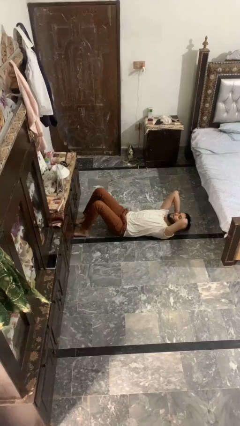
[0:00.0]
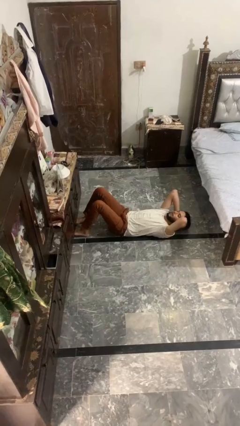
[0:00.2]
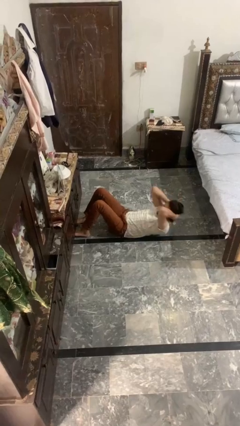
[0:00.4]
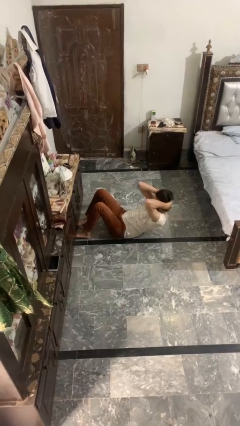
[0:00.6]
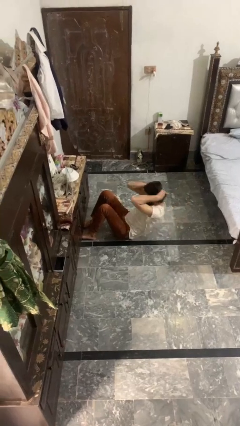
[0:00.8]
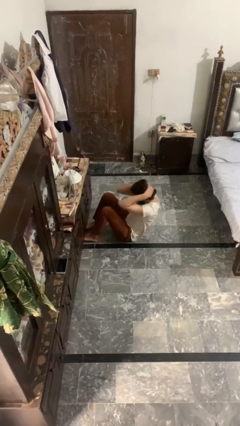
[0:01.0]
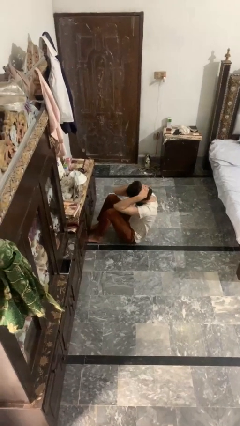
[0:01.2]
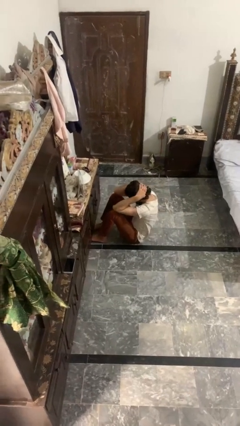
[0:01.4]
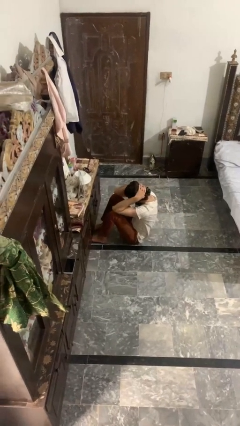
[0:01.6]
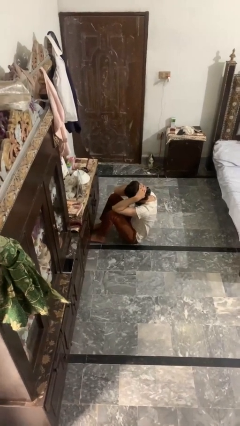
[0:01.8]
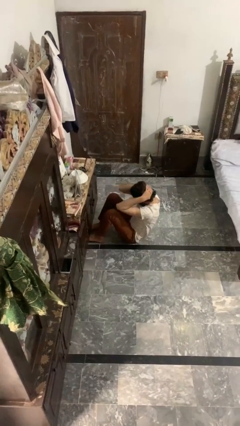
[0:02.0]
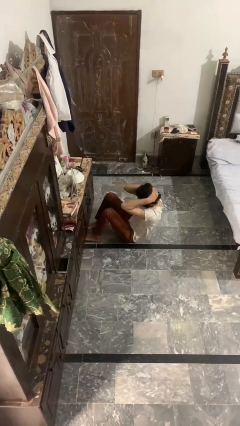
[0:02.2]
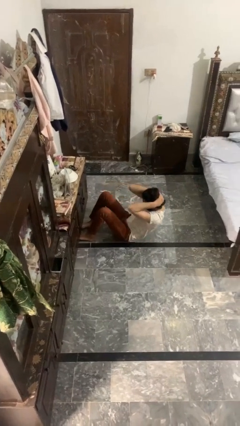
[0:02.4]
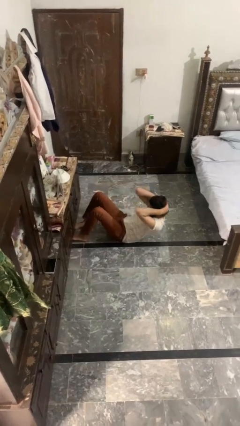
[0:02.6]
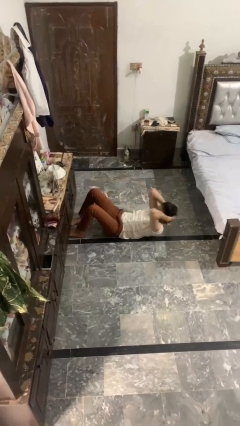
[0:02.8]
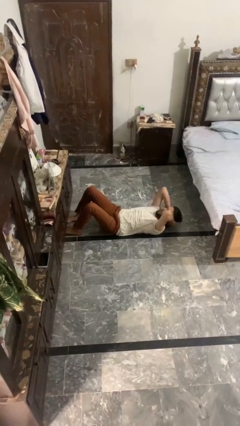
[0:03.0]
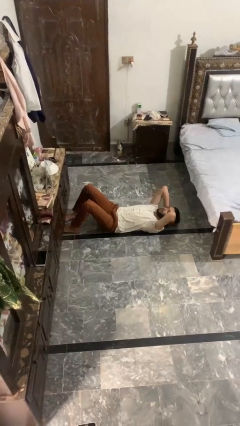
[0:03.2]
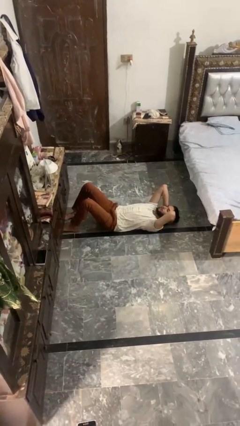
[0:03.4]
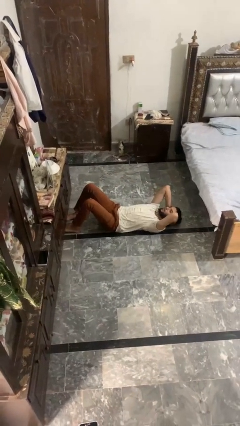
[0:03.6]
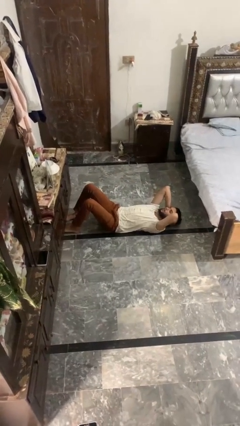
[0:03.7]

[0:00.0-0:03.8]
person exercises with situp

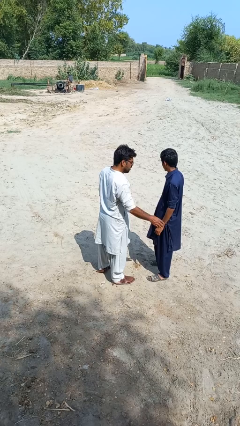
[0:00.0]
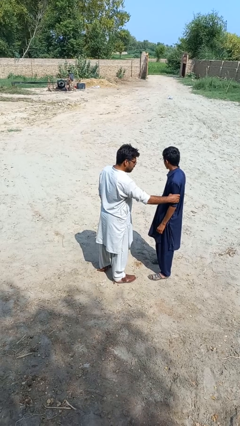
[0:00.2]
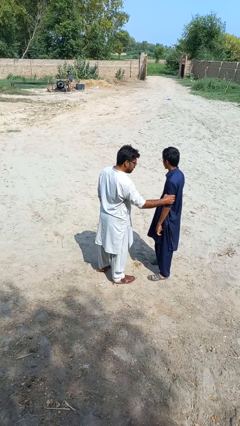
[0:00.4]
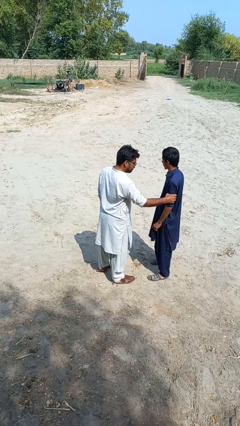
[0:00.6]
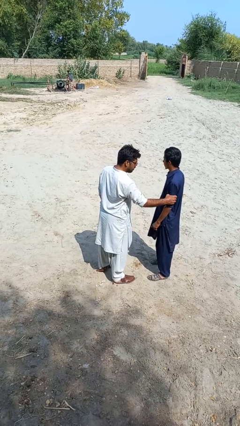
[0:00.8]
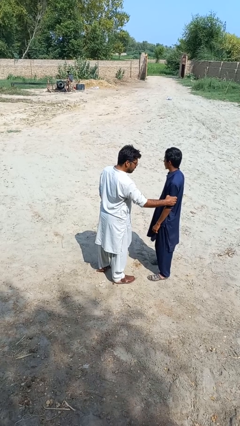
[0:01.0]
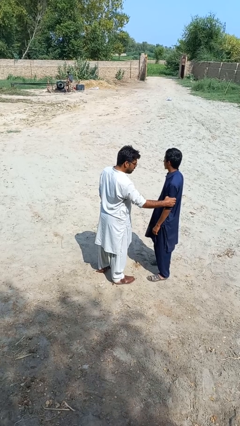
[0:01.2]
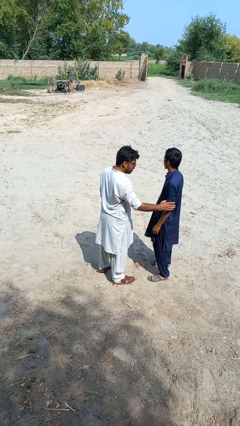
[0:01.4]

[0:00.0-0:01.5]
person grabs person by bicep

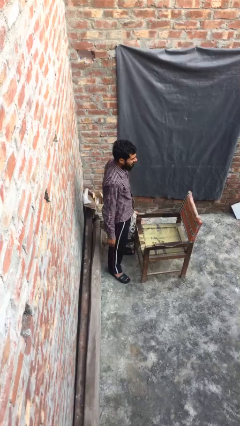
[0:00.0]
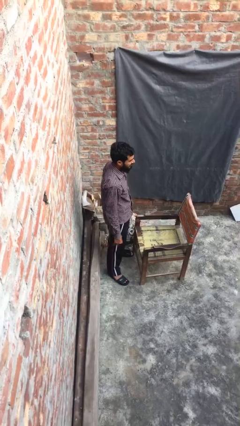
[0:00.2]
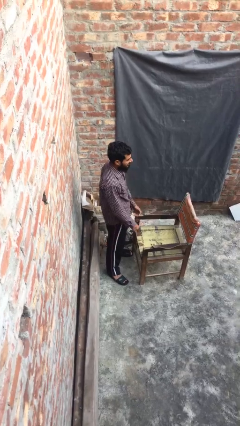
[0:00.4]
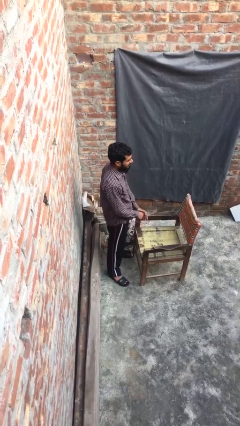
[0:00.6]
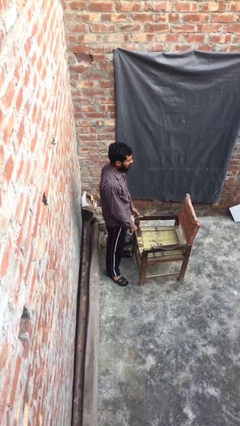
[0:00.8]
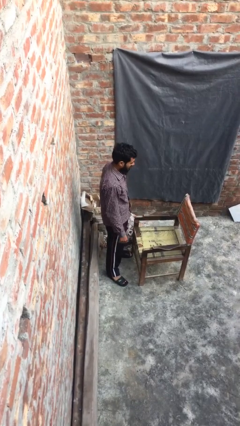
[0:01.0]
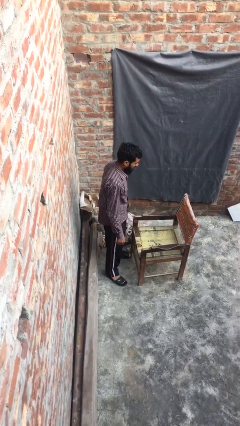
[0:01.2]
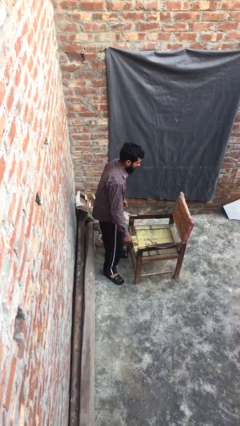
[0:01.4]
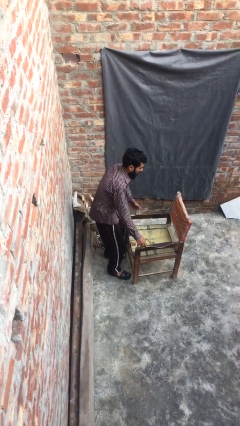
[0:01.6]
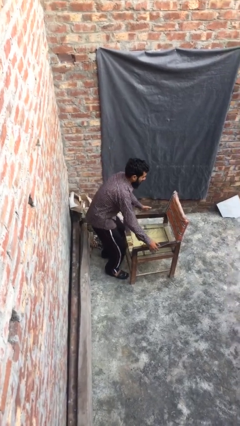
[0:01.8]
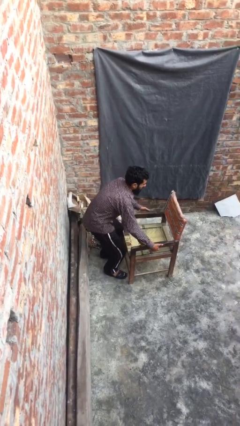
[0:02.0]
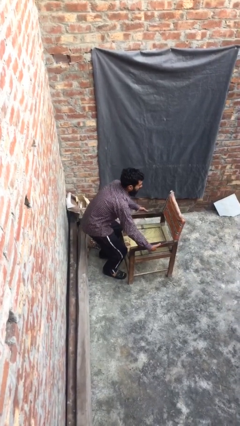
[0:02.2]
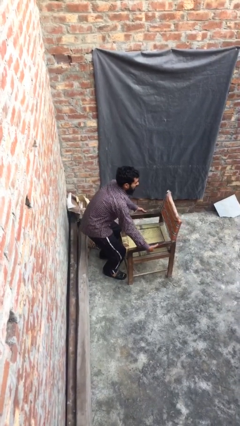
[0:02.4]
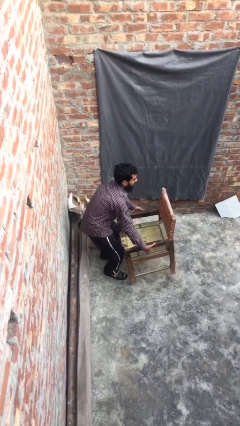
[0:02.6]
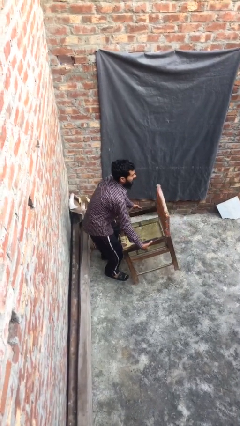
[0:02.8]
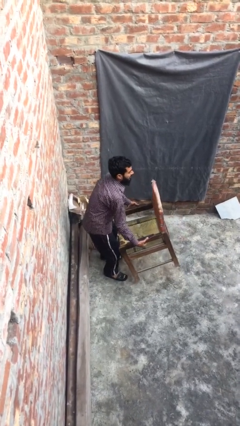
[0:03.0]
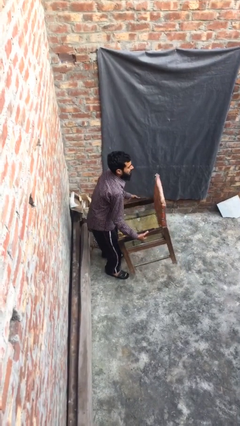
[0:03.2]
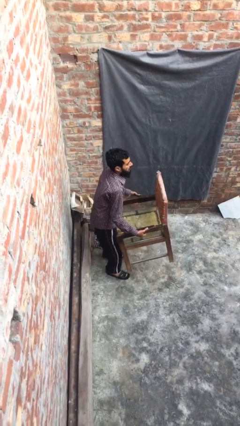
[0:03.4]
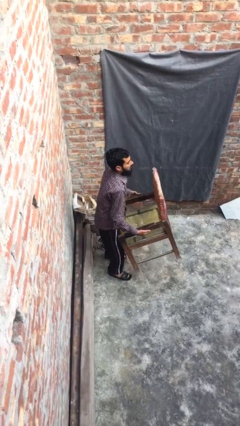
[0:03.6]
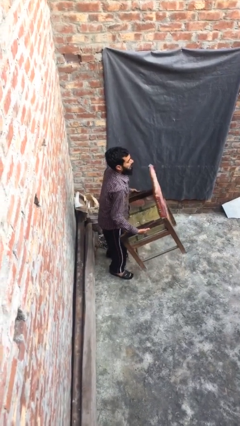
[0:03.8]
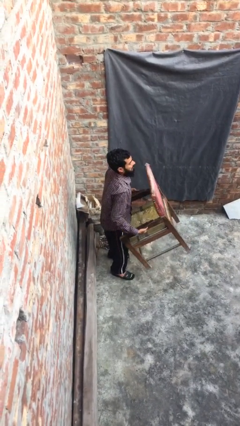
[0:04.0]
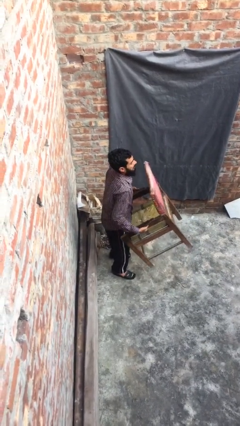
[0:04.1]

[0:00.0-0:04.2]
person picks up object from floor

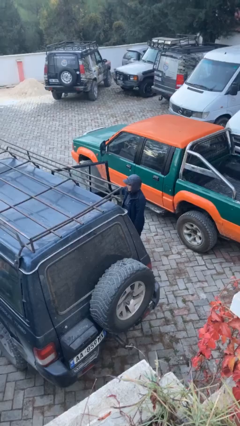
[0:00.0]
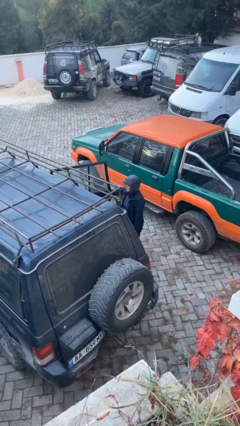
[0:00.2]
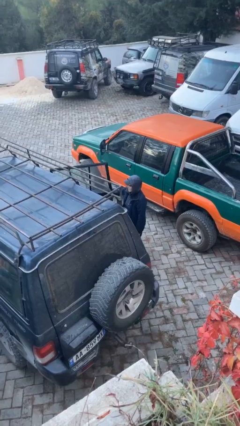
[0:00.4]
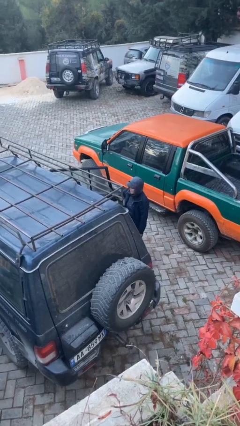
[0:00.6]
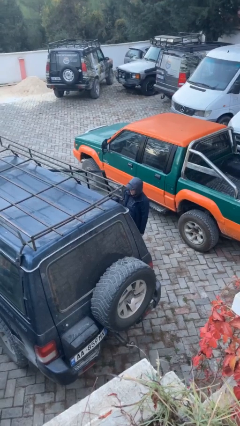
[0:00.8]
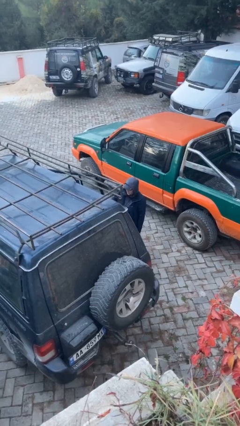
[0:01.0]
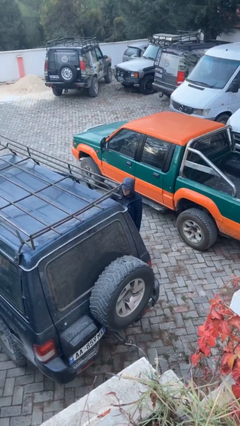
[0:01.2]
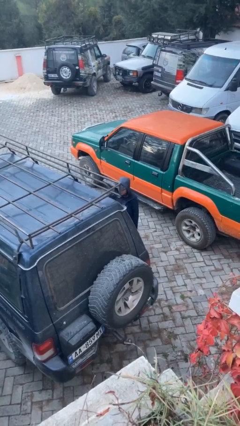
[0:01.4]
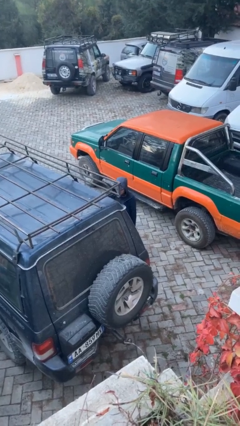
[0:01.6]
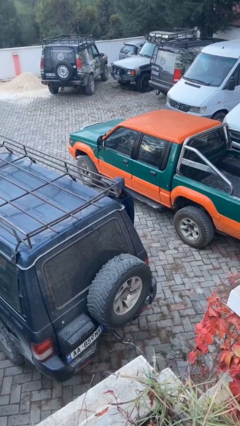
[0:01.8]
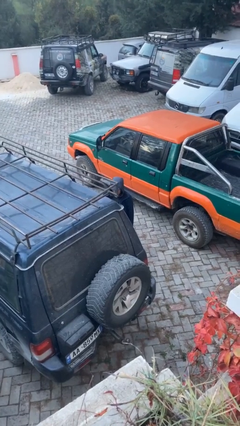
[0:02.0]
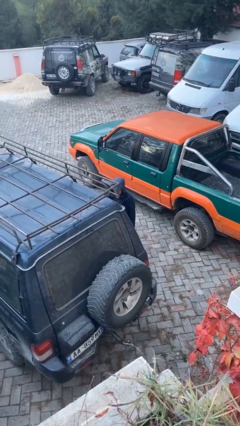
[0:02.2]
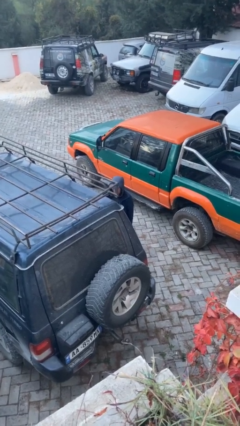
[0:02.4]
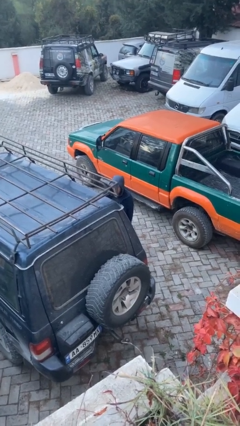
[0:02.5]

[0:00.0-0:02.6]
person closes car door

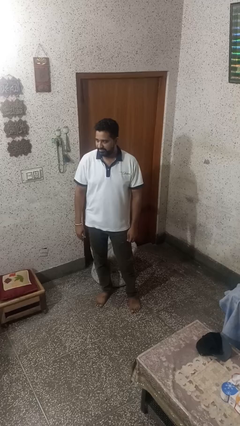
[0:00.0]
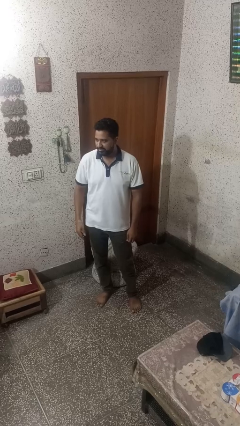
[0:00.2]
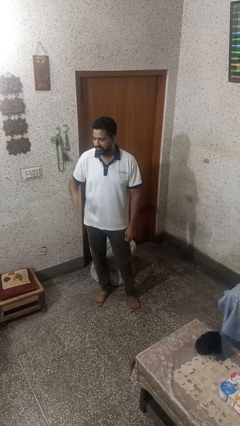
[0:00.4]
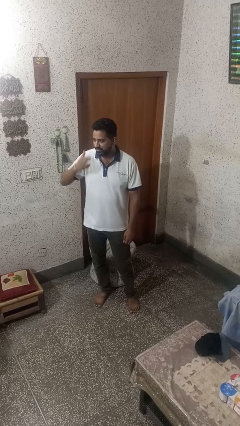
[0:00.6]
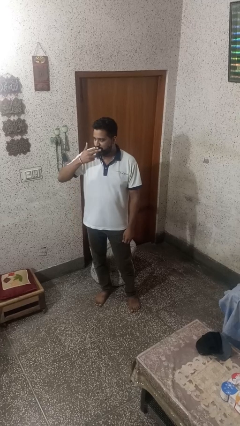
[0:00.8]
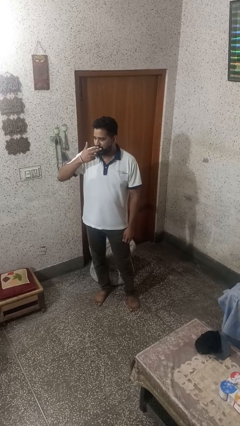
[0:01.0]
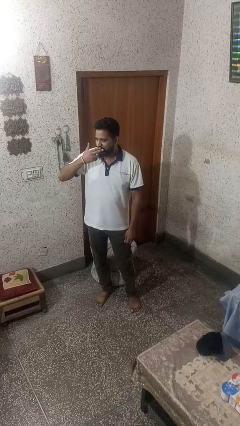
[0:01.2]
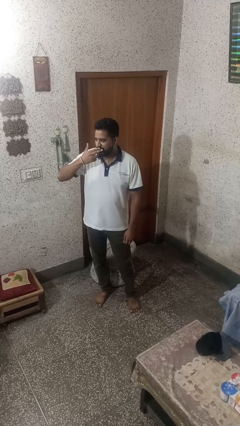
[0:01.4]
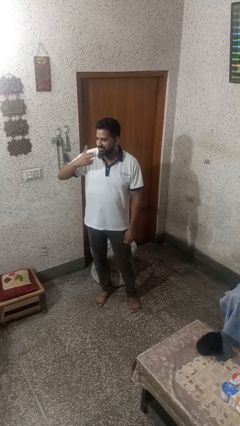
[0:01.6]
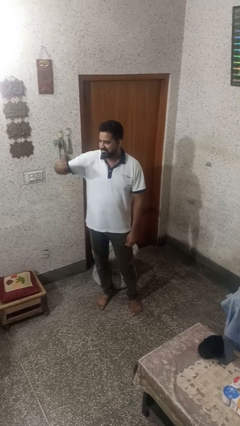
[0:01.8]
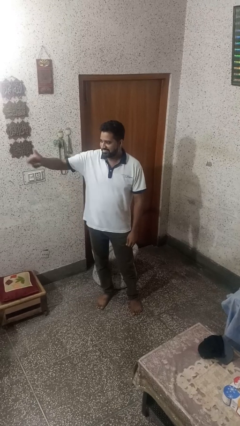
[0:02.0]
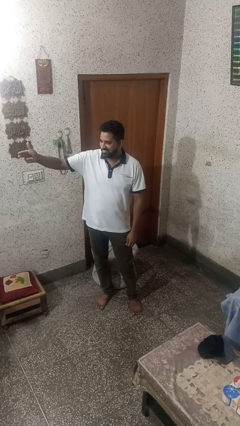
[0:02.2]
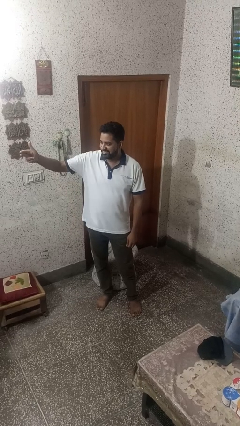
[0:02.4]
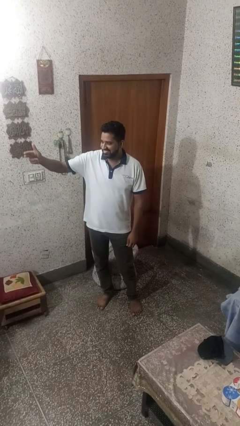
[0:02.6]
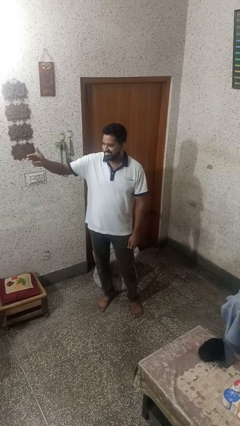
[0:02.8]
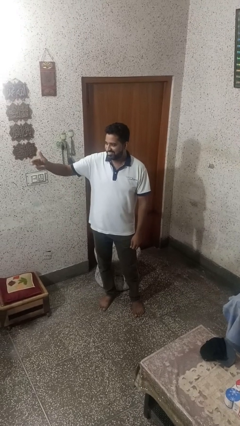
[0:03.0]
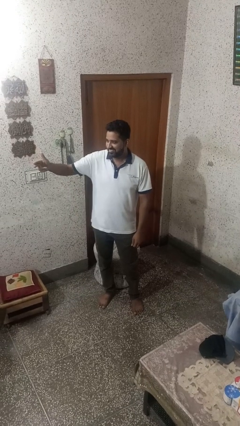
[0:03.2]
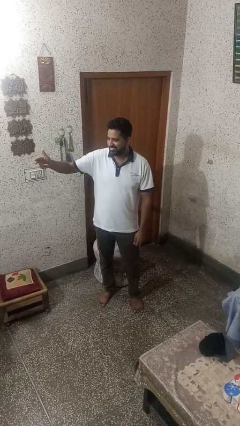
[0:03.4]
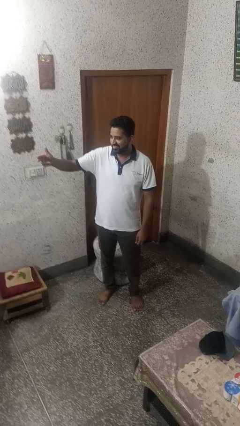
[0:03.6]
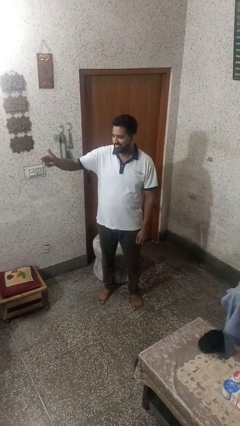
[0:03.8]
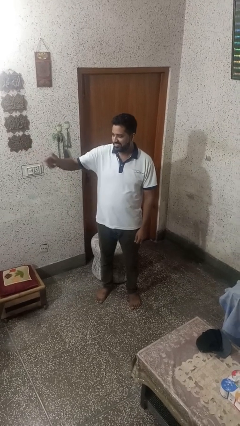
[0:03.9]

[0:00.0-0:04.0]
person gestures blow kiss

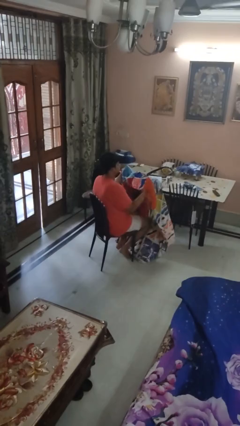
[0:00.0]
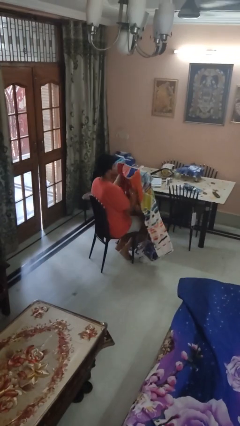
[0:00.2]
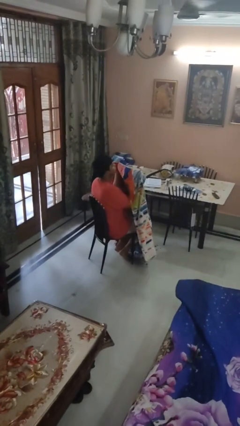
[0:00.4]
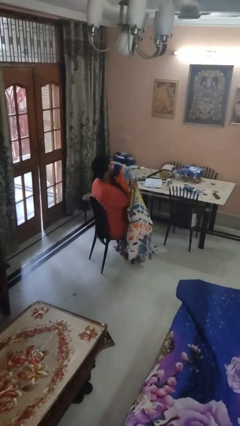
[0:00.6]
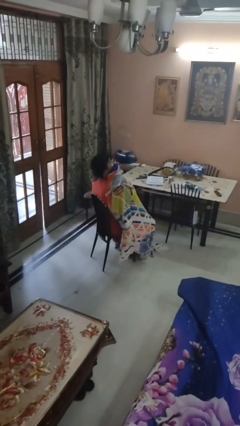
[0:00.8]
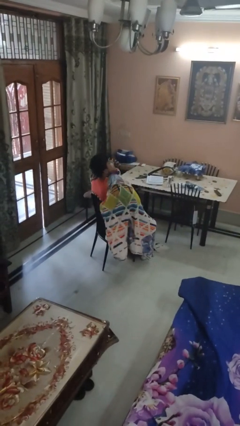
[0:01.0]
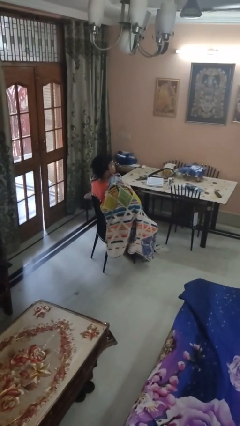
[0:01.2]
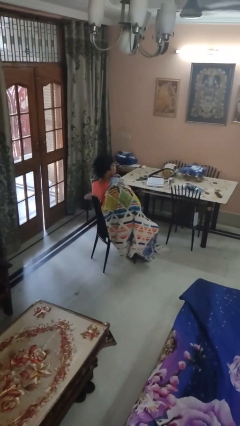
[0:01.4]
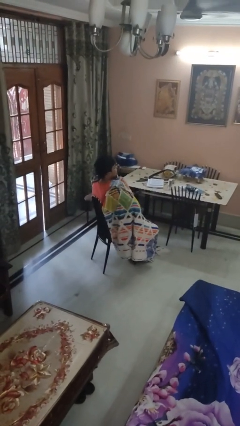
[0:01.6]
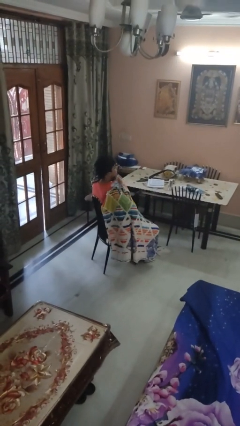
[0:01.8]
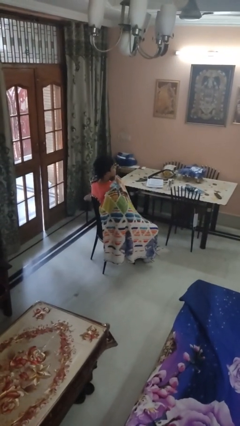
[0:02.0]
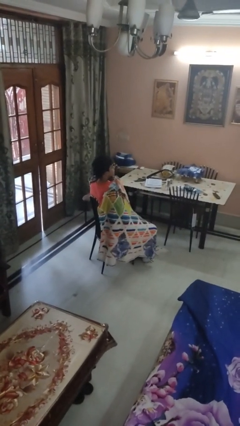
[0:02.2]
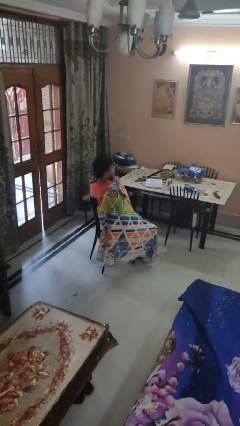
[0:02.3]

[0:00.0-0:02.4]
person covers with blanket
